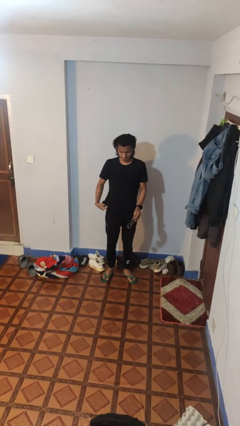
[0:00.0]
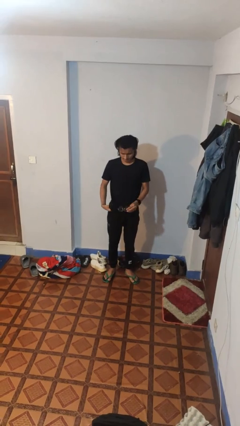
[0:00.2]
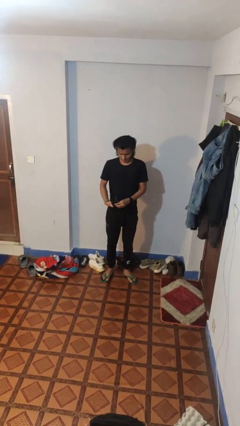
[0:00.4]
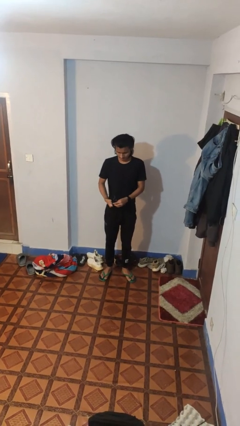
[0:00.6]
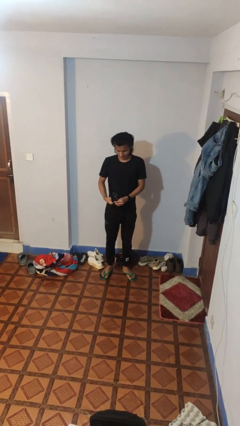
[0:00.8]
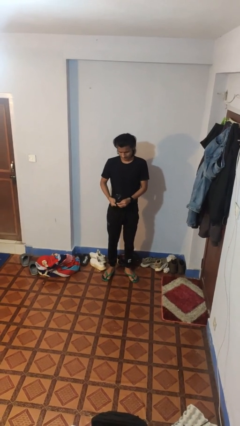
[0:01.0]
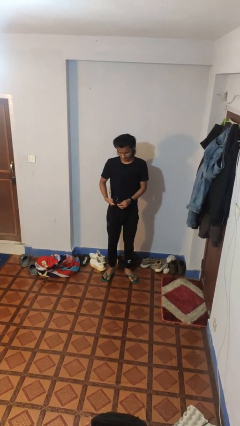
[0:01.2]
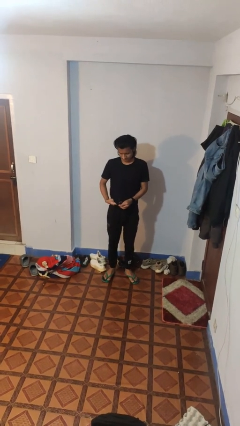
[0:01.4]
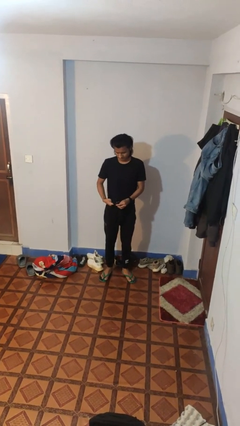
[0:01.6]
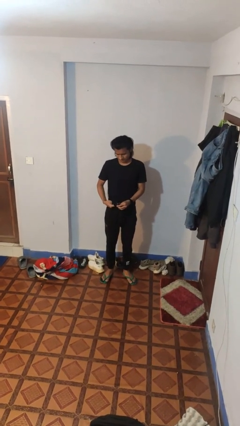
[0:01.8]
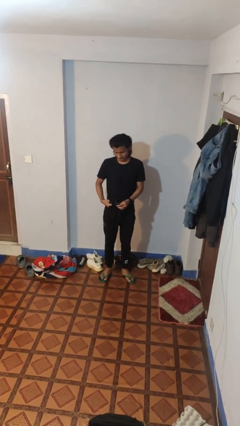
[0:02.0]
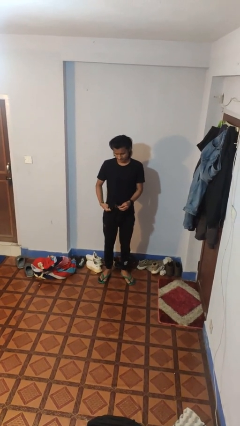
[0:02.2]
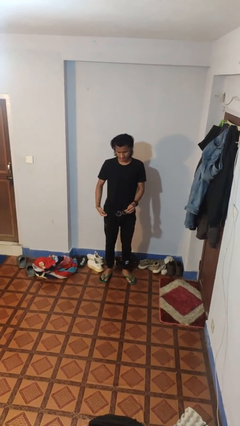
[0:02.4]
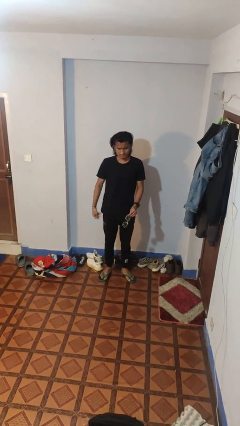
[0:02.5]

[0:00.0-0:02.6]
person cleans eyeglasses

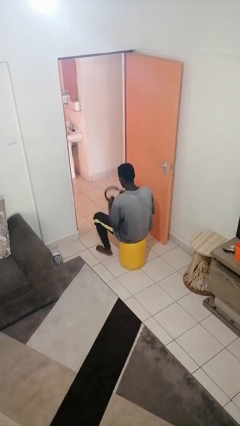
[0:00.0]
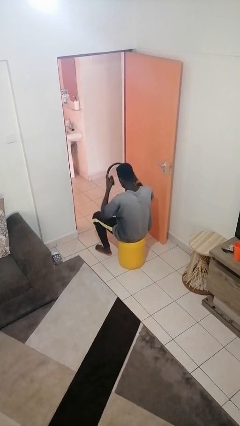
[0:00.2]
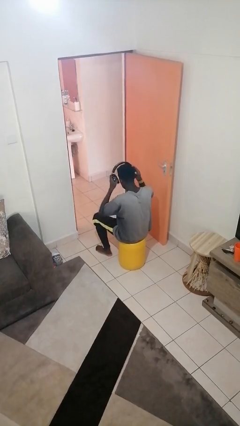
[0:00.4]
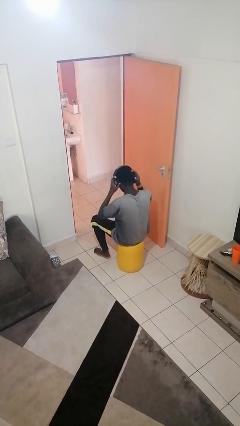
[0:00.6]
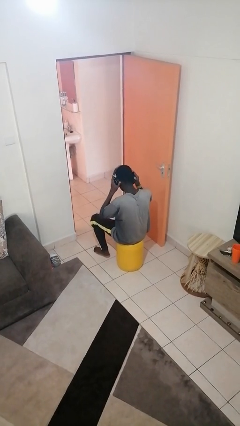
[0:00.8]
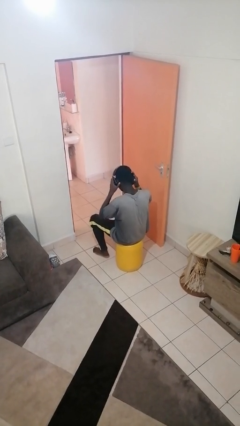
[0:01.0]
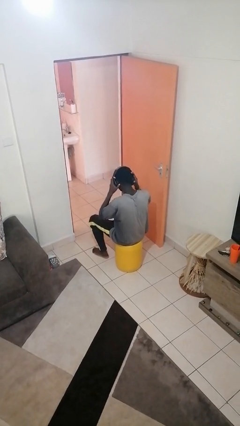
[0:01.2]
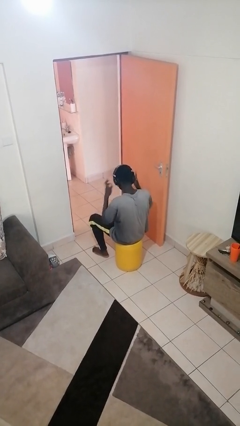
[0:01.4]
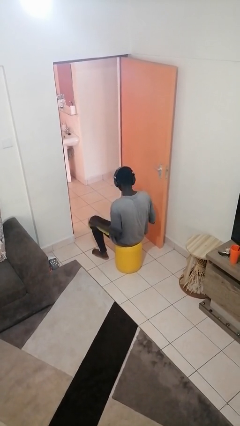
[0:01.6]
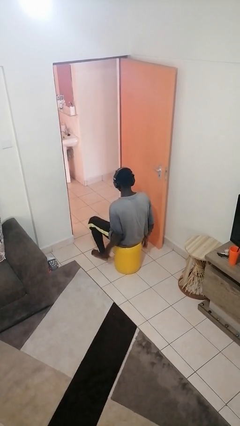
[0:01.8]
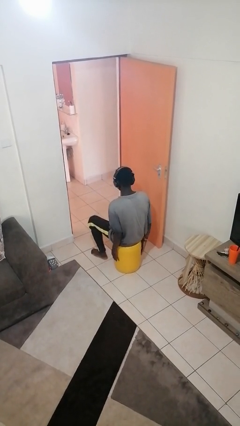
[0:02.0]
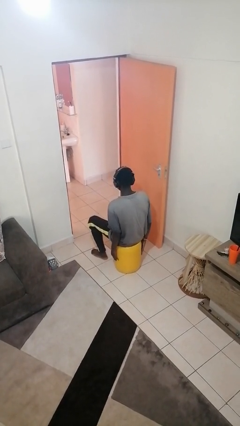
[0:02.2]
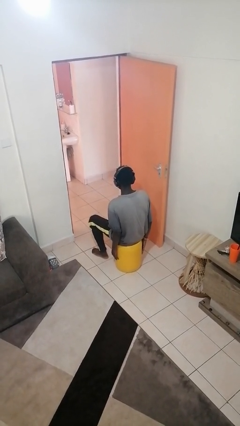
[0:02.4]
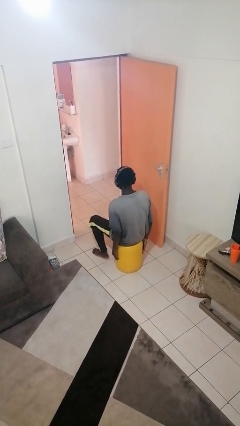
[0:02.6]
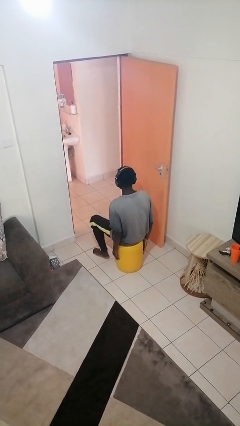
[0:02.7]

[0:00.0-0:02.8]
person puts on headphones

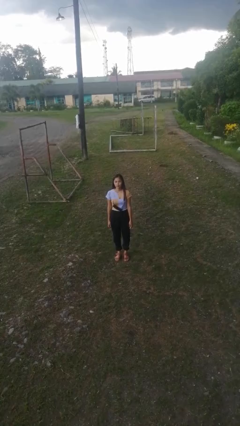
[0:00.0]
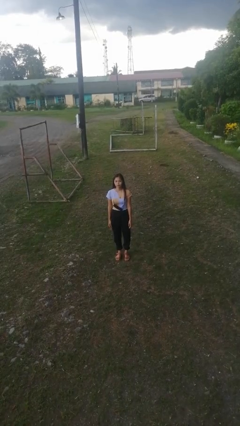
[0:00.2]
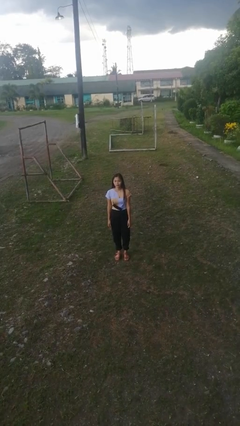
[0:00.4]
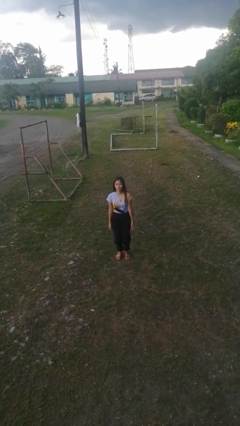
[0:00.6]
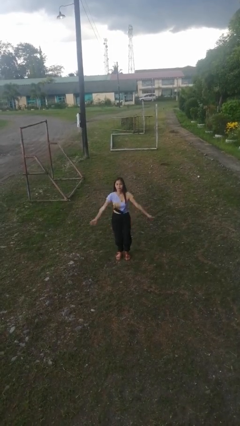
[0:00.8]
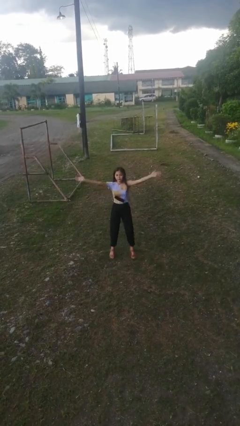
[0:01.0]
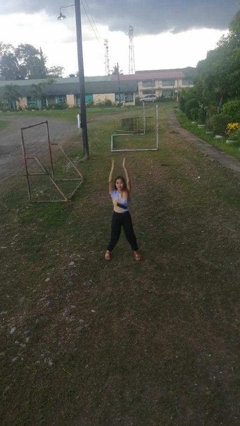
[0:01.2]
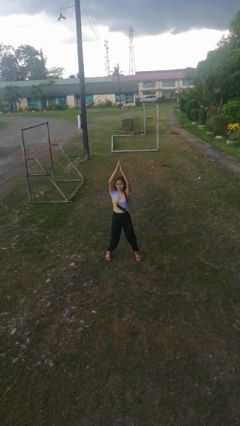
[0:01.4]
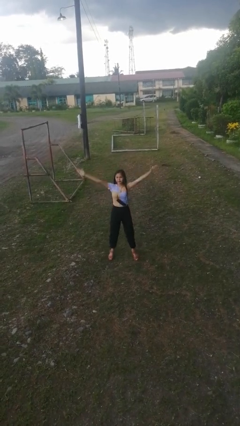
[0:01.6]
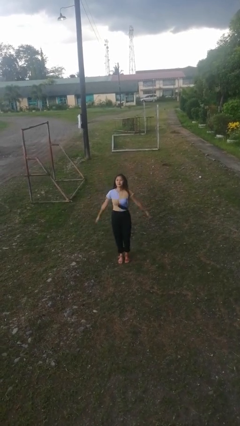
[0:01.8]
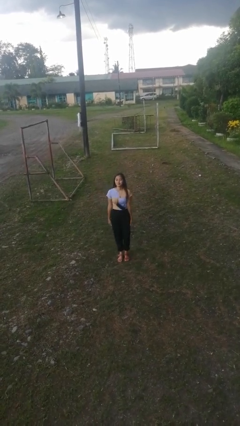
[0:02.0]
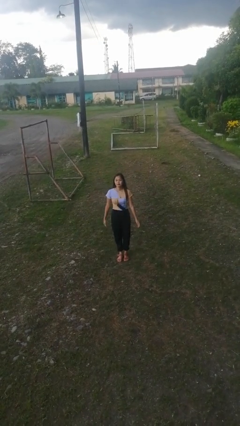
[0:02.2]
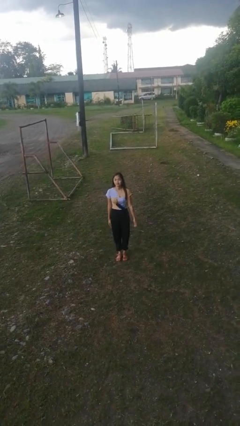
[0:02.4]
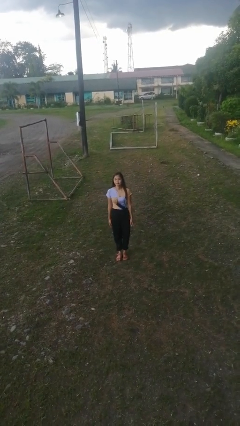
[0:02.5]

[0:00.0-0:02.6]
person exercises with jumping jacks

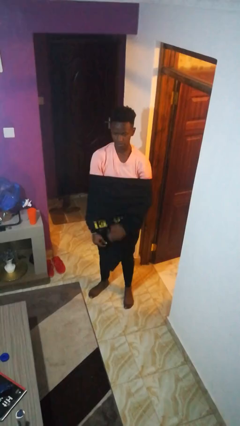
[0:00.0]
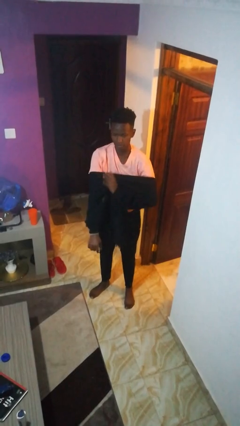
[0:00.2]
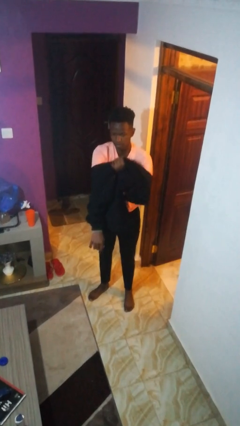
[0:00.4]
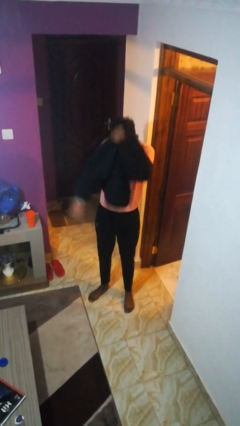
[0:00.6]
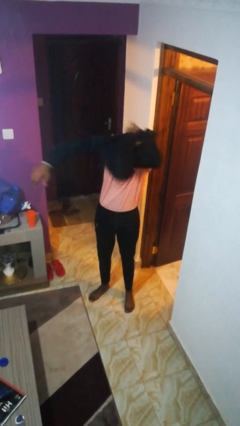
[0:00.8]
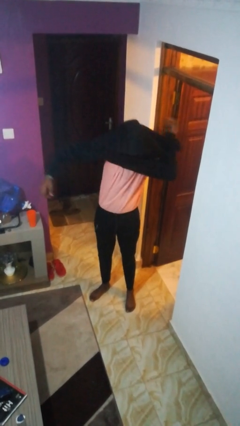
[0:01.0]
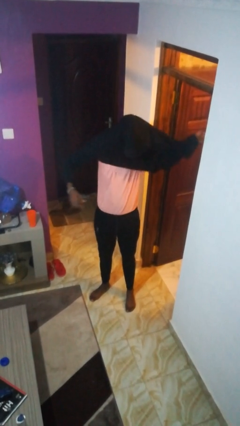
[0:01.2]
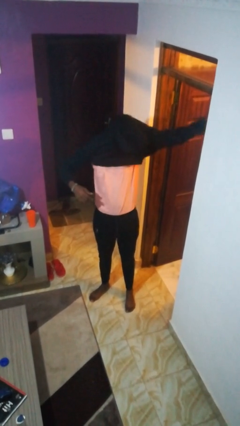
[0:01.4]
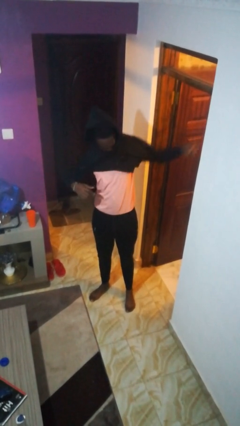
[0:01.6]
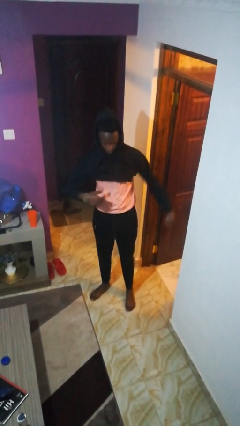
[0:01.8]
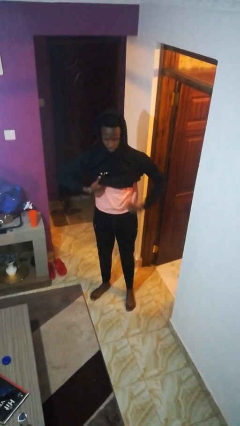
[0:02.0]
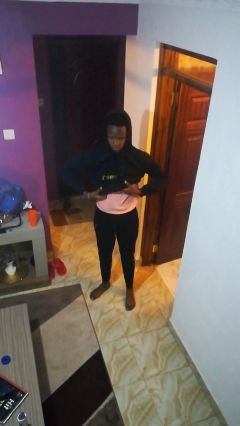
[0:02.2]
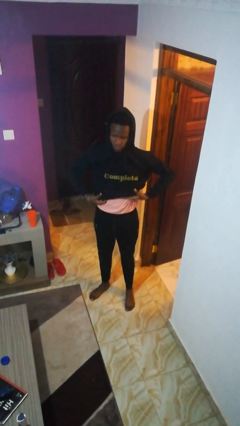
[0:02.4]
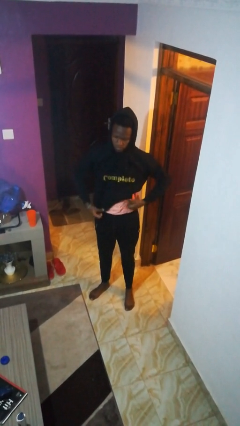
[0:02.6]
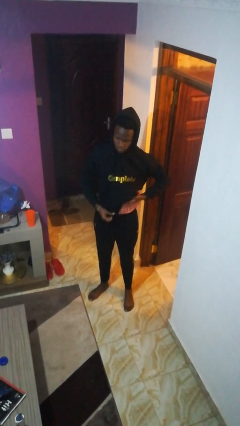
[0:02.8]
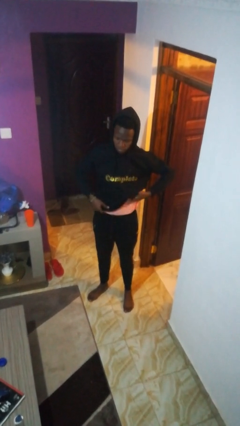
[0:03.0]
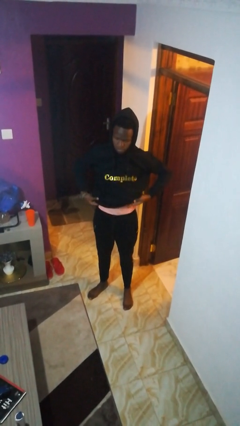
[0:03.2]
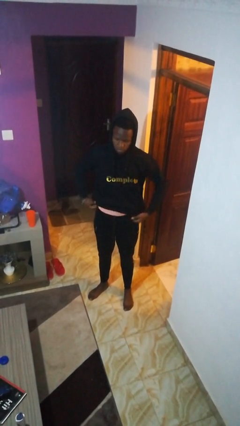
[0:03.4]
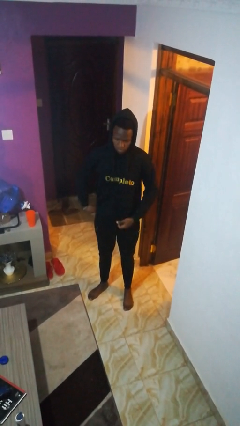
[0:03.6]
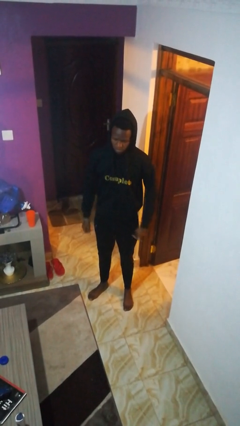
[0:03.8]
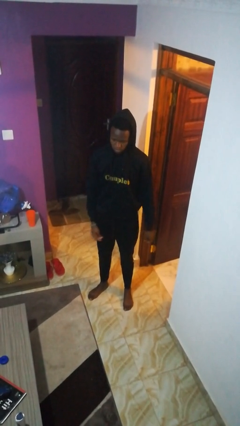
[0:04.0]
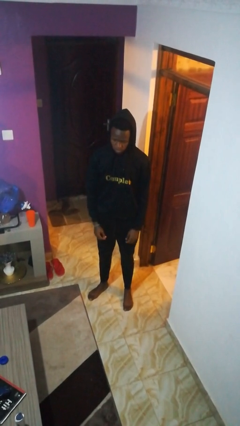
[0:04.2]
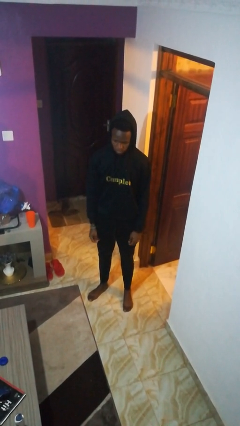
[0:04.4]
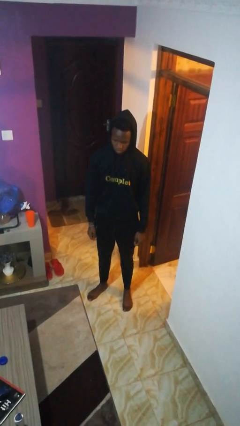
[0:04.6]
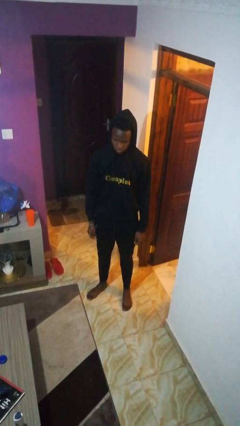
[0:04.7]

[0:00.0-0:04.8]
person puts on hoodie

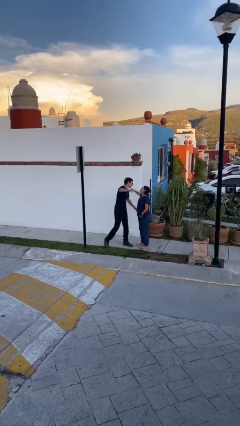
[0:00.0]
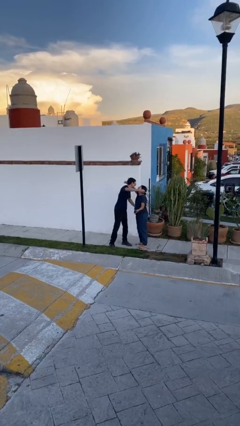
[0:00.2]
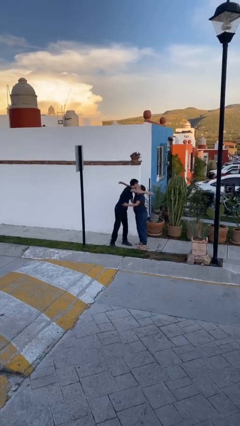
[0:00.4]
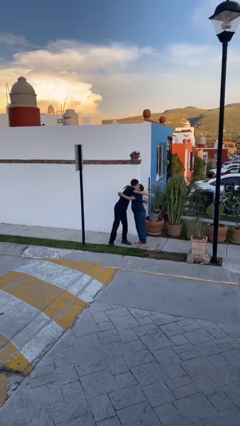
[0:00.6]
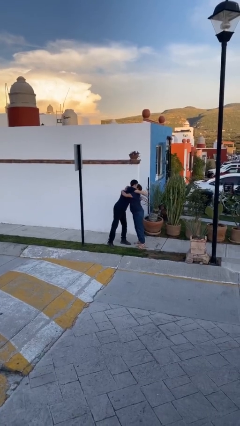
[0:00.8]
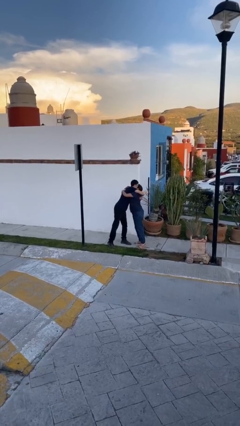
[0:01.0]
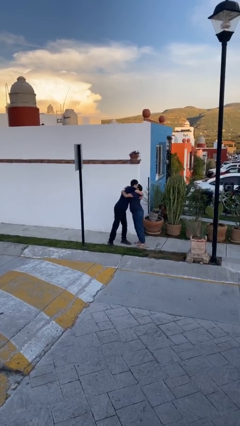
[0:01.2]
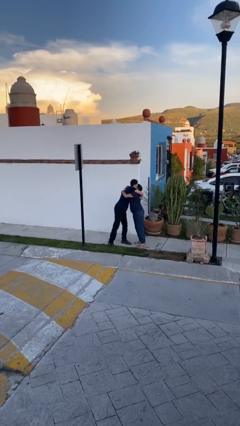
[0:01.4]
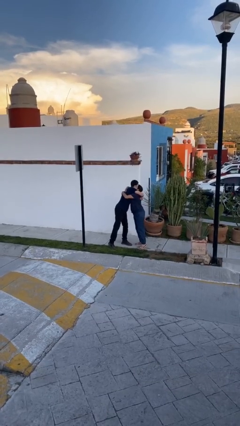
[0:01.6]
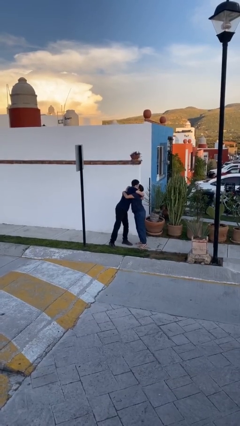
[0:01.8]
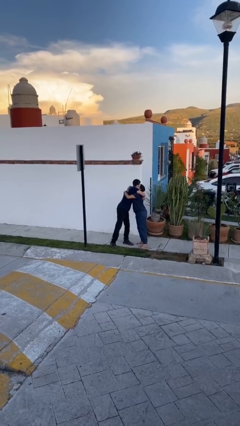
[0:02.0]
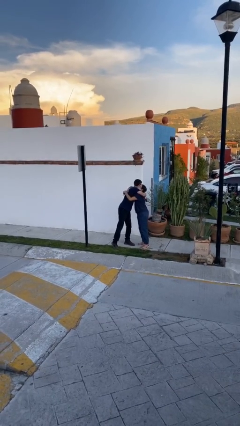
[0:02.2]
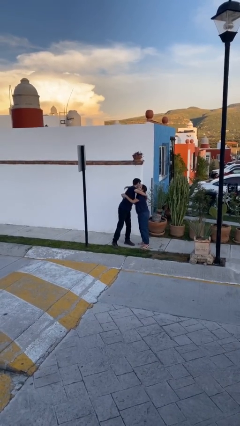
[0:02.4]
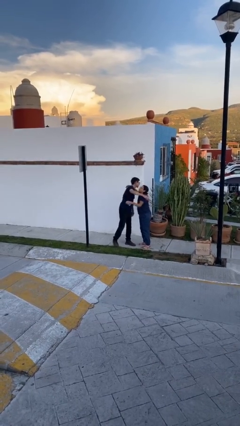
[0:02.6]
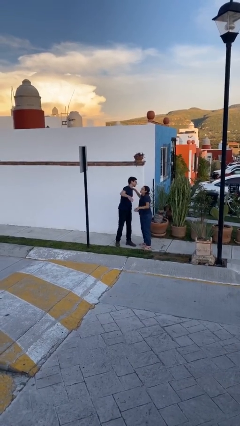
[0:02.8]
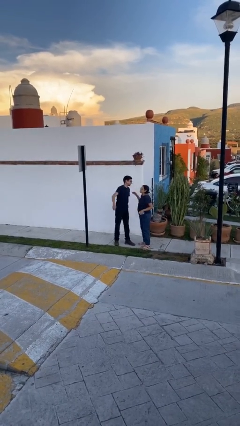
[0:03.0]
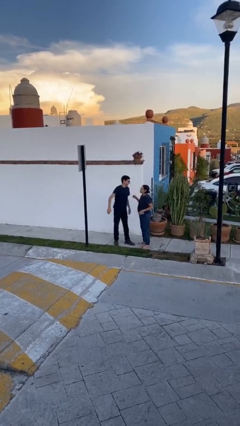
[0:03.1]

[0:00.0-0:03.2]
person embraces person

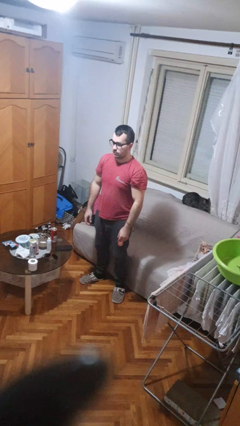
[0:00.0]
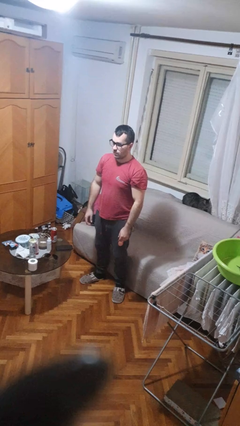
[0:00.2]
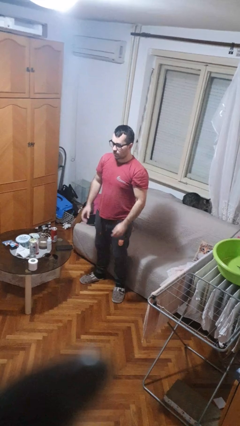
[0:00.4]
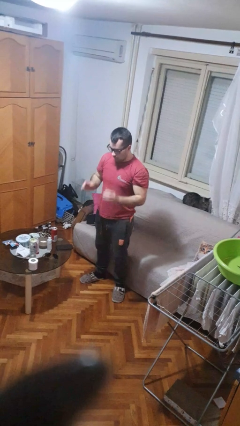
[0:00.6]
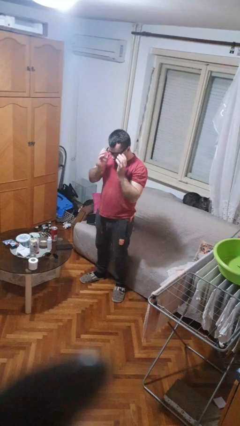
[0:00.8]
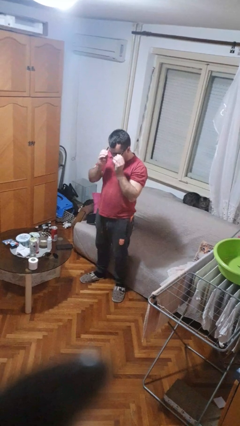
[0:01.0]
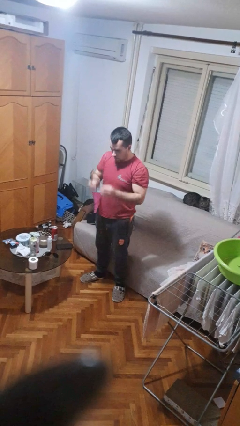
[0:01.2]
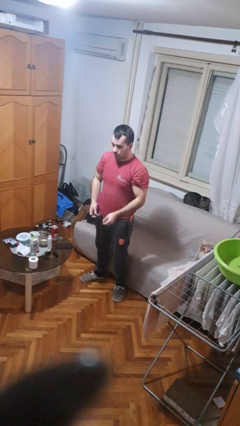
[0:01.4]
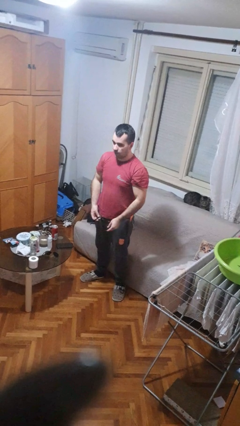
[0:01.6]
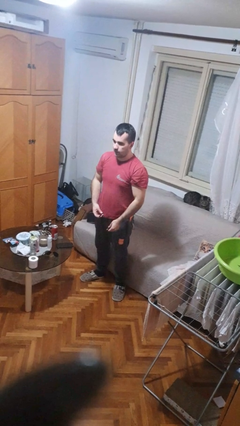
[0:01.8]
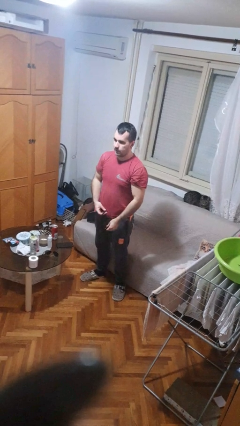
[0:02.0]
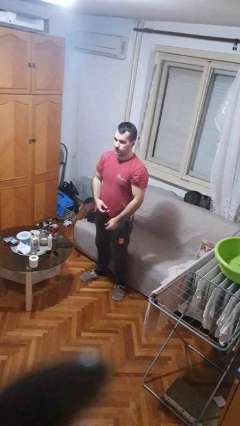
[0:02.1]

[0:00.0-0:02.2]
person takes off glasses
